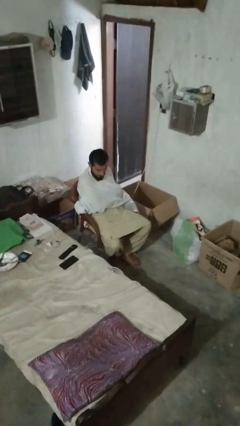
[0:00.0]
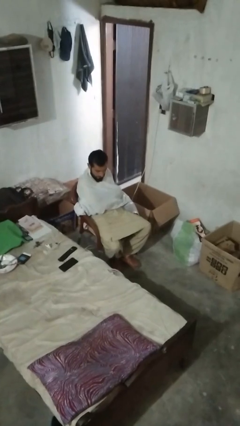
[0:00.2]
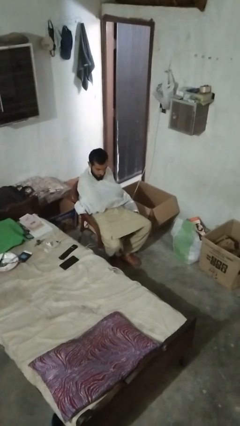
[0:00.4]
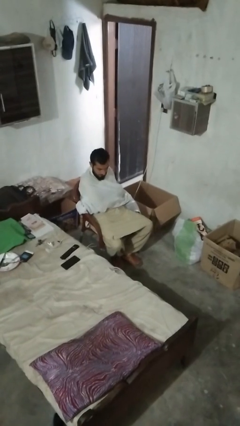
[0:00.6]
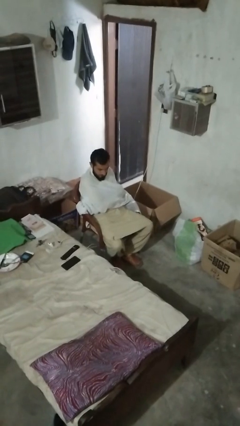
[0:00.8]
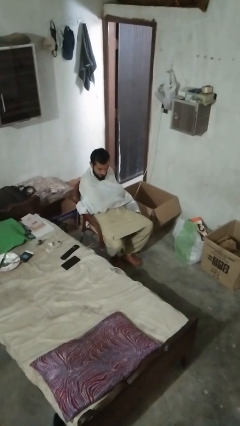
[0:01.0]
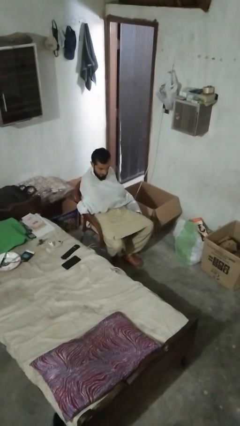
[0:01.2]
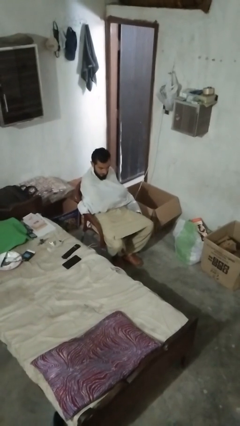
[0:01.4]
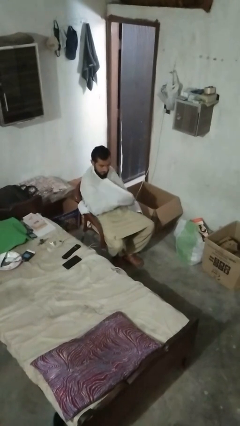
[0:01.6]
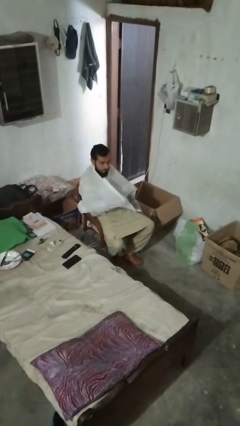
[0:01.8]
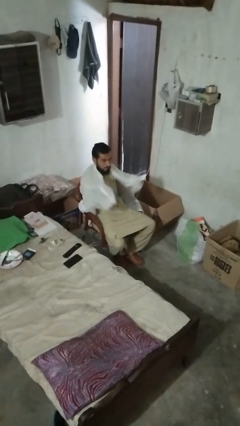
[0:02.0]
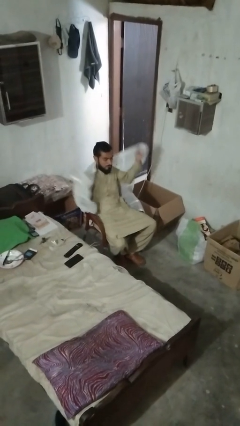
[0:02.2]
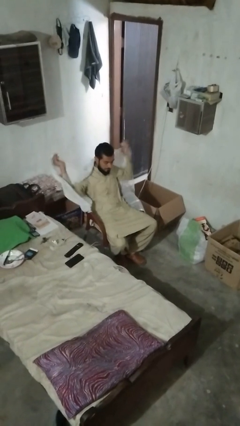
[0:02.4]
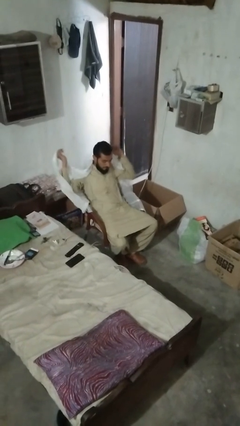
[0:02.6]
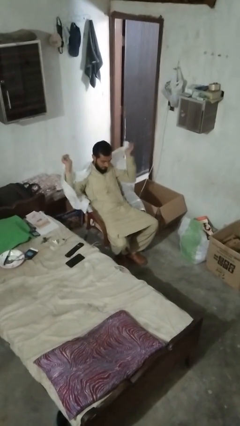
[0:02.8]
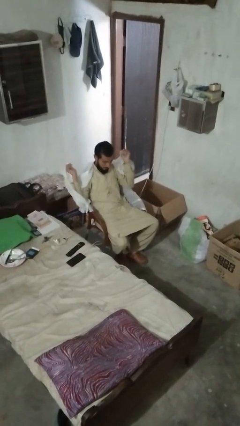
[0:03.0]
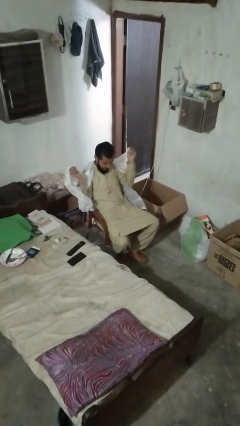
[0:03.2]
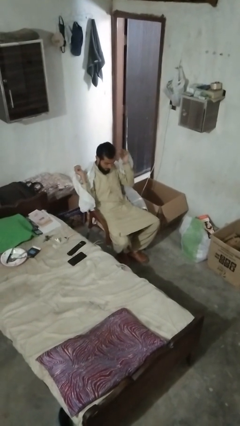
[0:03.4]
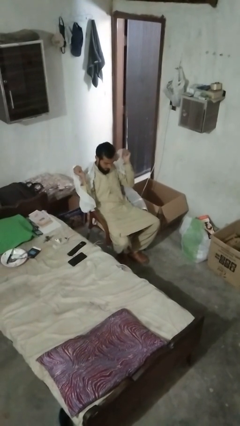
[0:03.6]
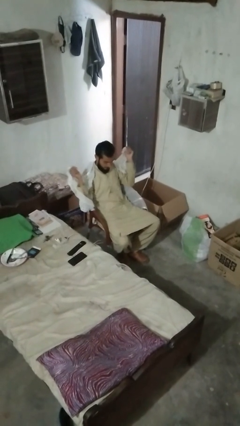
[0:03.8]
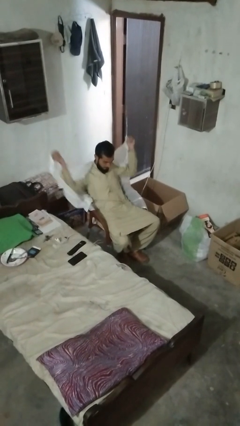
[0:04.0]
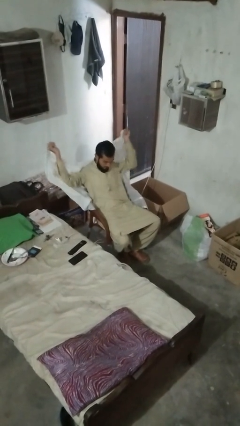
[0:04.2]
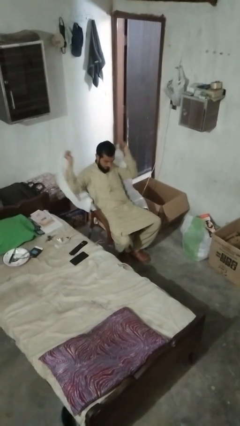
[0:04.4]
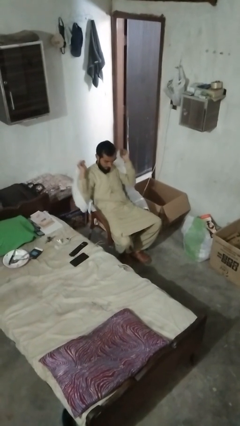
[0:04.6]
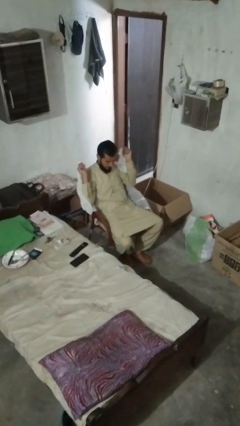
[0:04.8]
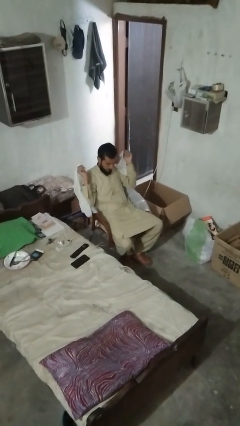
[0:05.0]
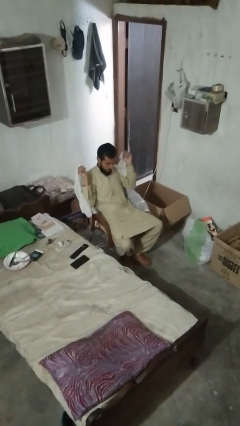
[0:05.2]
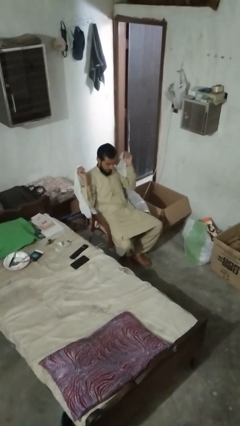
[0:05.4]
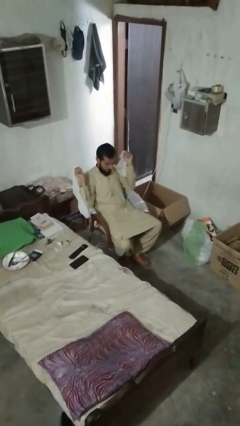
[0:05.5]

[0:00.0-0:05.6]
person uncovers with blanket

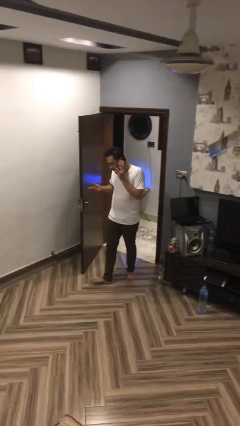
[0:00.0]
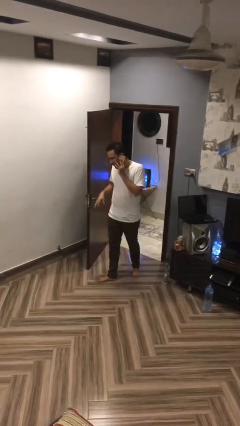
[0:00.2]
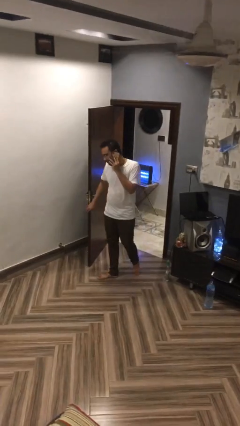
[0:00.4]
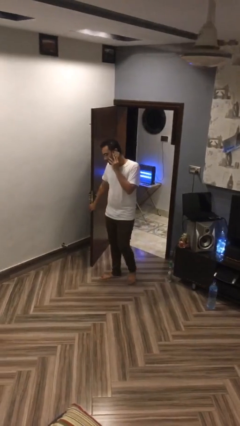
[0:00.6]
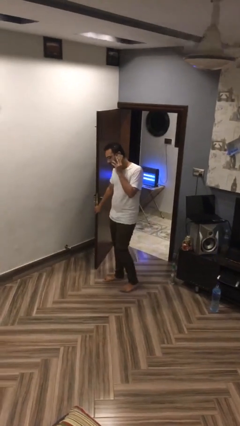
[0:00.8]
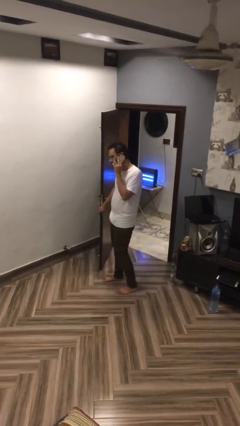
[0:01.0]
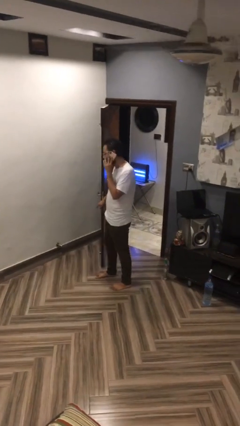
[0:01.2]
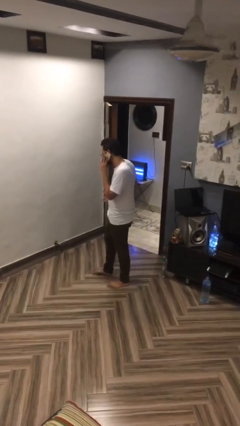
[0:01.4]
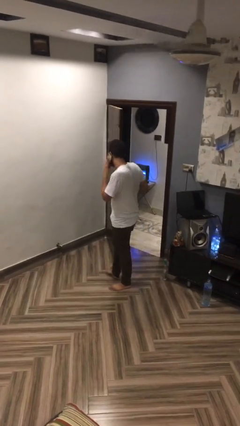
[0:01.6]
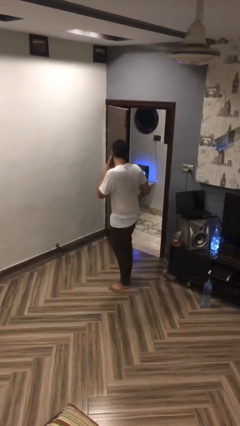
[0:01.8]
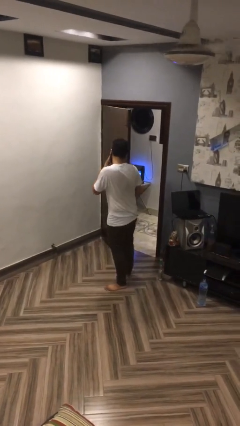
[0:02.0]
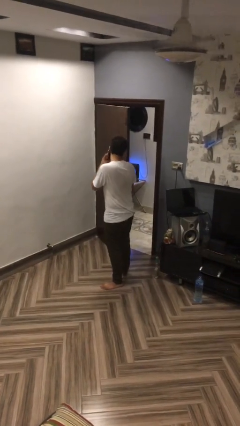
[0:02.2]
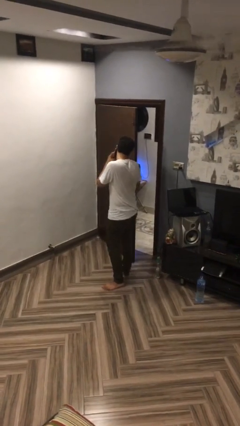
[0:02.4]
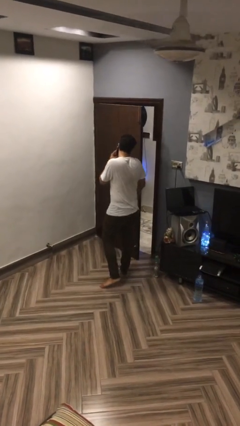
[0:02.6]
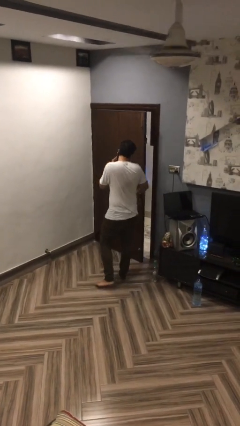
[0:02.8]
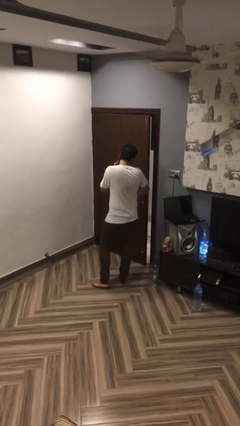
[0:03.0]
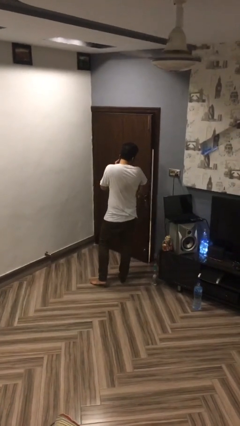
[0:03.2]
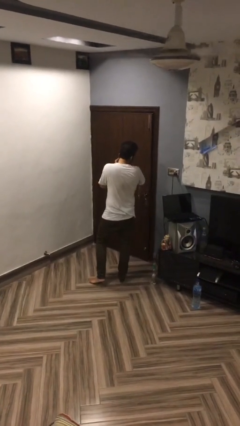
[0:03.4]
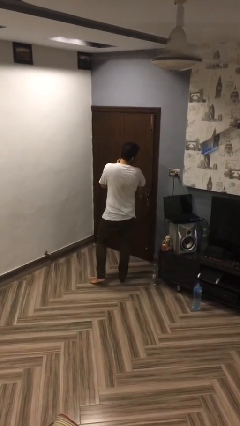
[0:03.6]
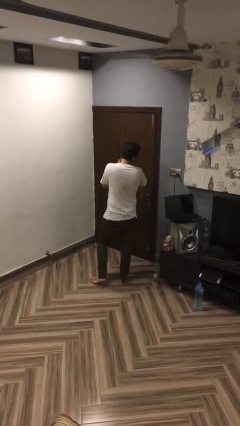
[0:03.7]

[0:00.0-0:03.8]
person closes facility door

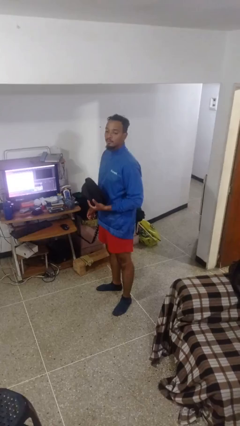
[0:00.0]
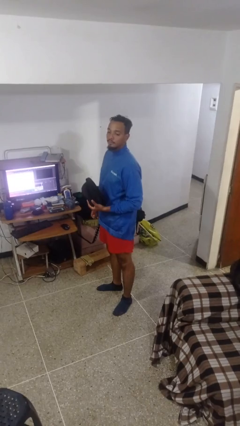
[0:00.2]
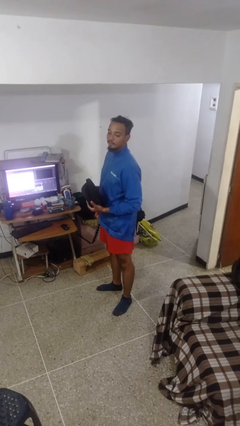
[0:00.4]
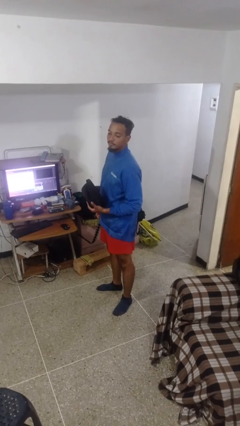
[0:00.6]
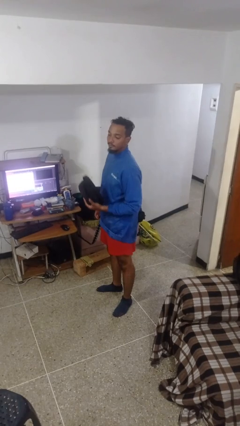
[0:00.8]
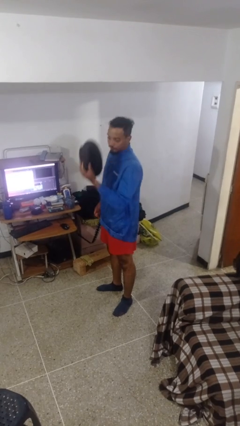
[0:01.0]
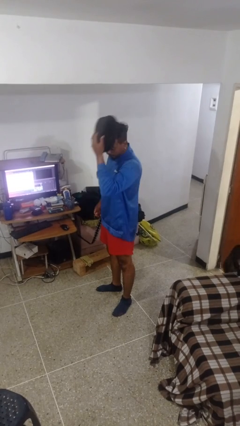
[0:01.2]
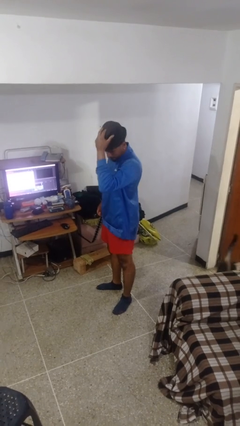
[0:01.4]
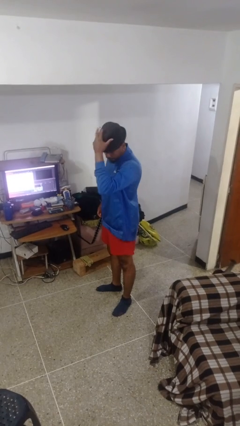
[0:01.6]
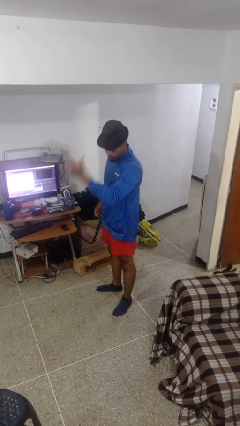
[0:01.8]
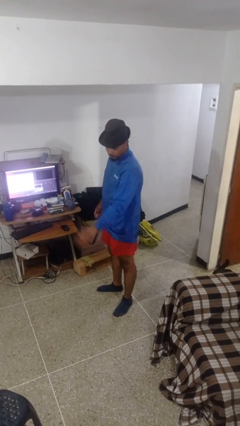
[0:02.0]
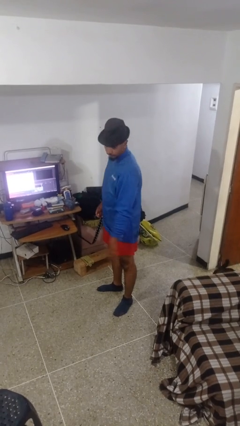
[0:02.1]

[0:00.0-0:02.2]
person puts on hat

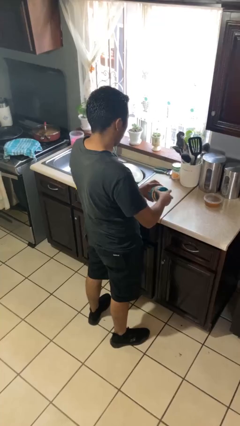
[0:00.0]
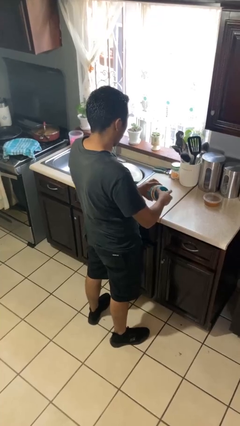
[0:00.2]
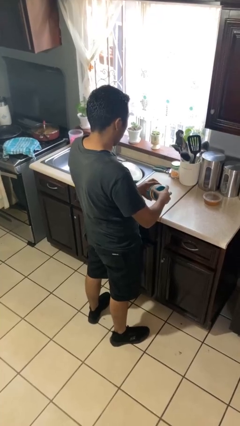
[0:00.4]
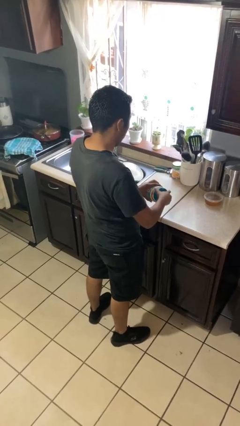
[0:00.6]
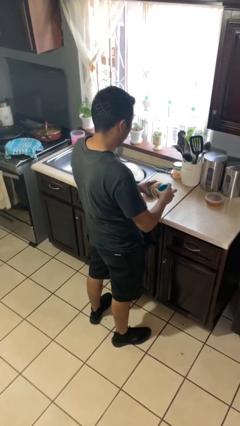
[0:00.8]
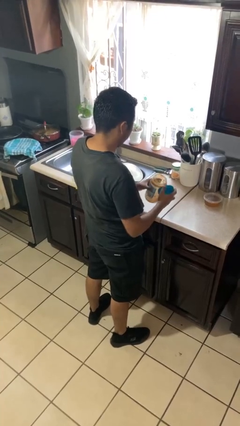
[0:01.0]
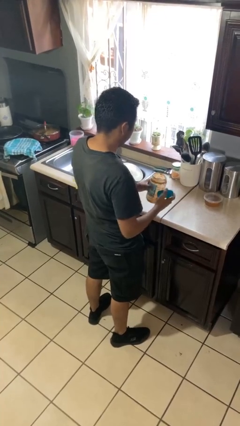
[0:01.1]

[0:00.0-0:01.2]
person opens jar

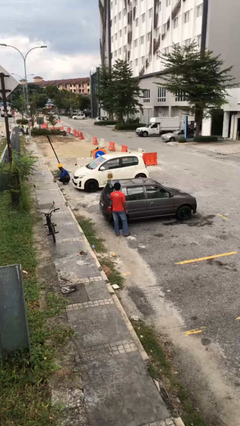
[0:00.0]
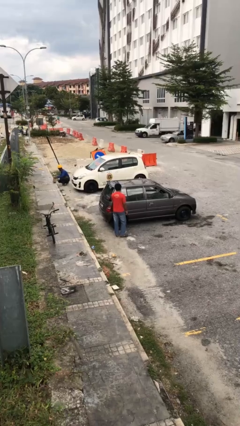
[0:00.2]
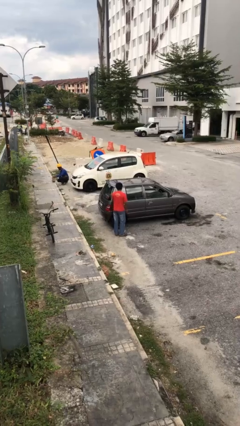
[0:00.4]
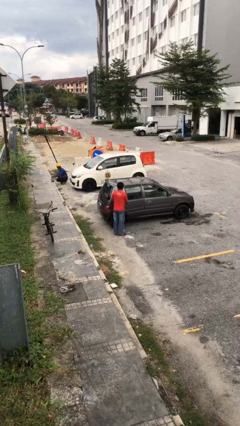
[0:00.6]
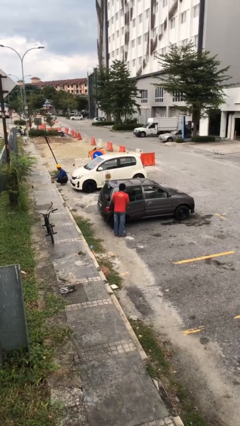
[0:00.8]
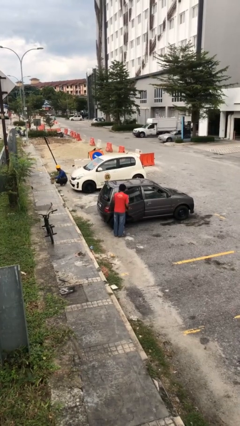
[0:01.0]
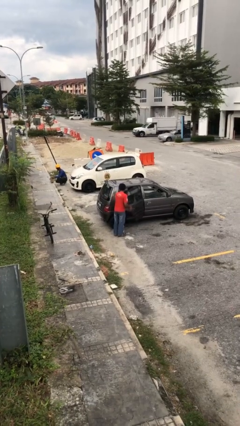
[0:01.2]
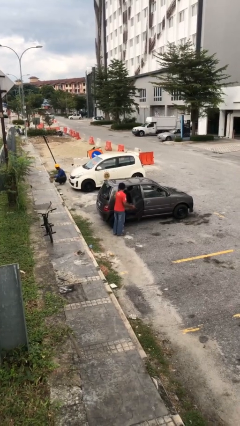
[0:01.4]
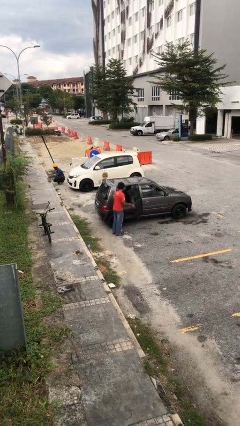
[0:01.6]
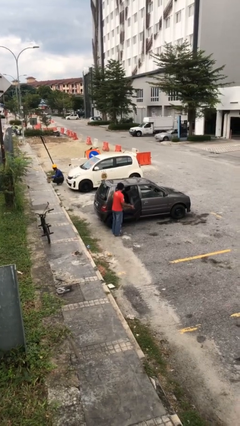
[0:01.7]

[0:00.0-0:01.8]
person opens car door

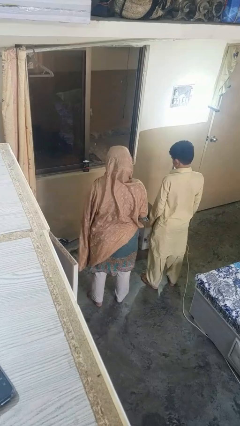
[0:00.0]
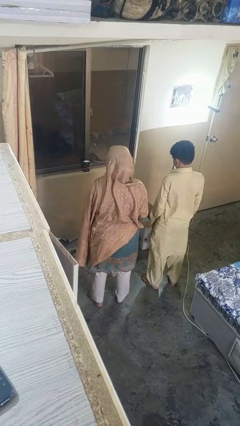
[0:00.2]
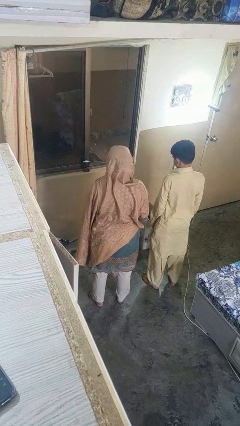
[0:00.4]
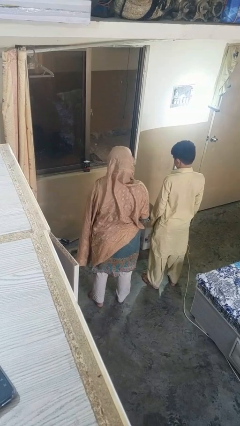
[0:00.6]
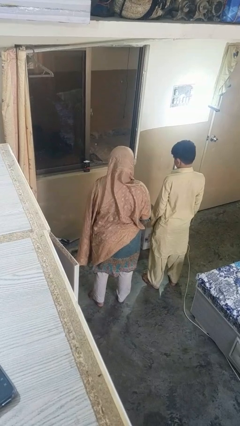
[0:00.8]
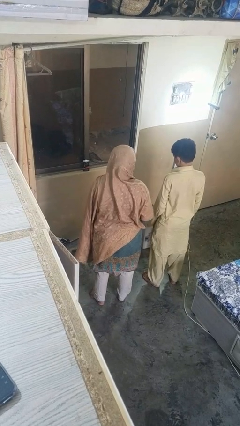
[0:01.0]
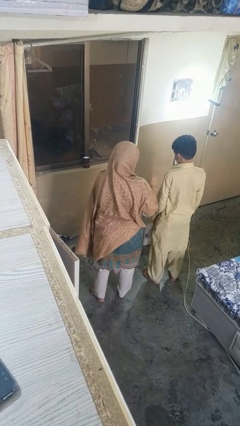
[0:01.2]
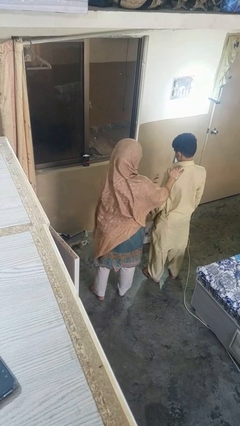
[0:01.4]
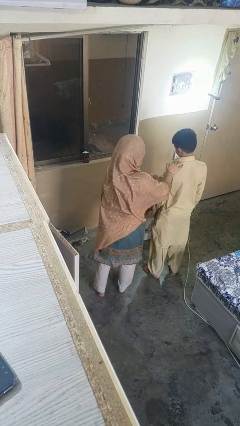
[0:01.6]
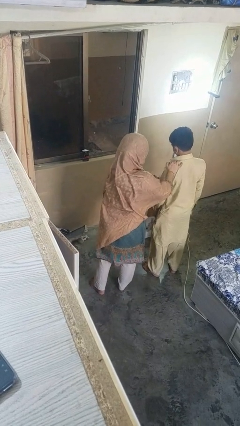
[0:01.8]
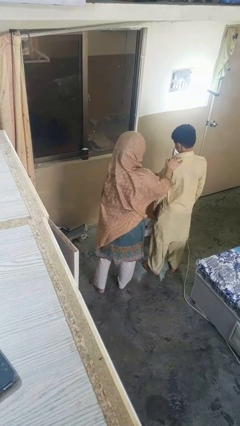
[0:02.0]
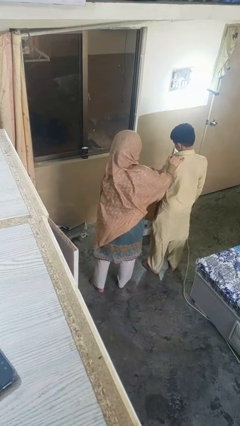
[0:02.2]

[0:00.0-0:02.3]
person shoves person

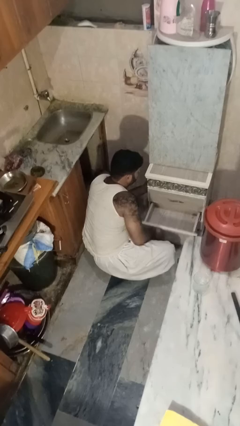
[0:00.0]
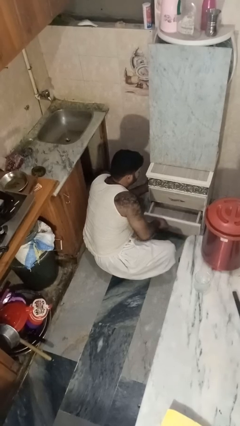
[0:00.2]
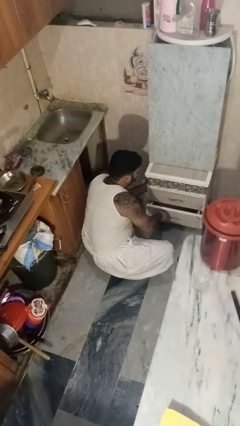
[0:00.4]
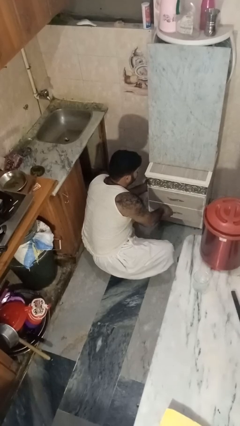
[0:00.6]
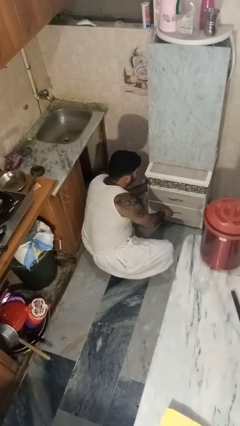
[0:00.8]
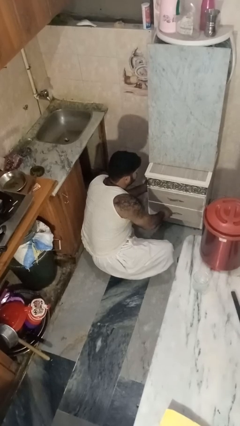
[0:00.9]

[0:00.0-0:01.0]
person closes kitchen drawer
